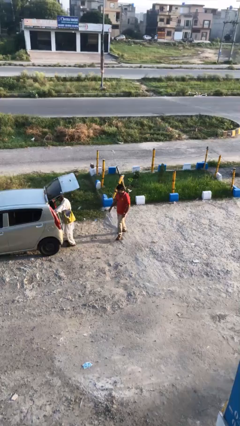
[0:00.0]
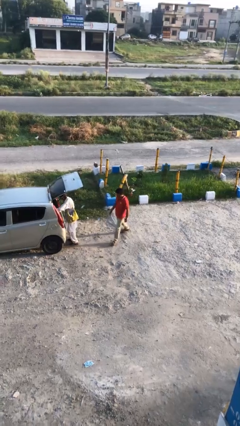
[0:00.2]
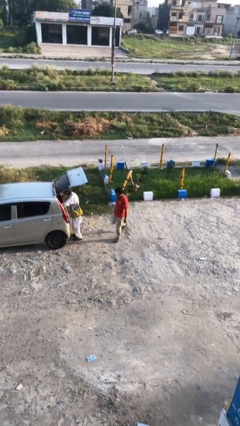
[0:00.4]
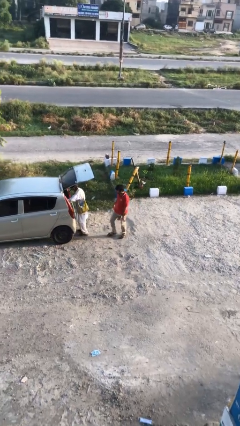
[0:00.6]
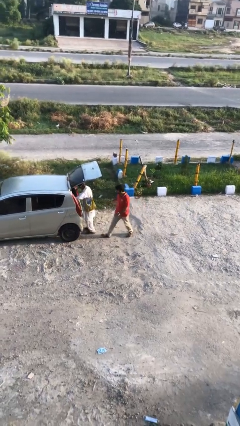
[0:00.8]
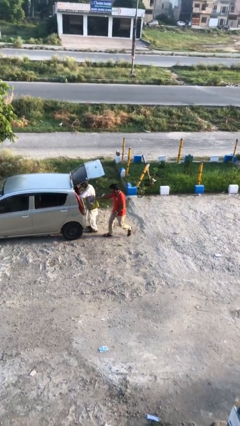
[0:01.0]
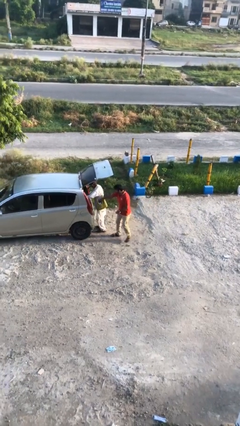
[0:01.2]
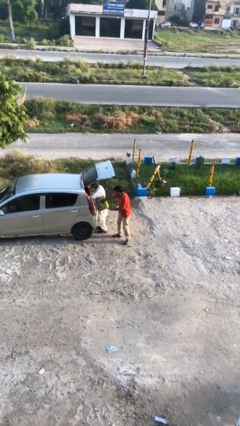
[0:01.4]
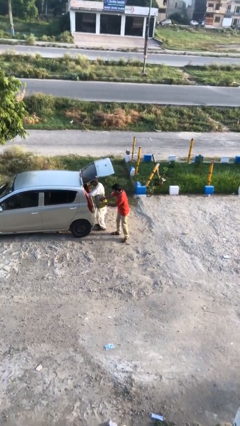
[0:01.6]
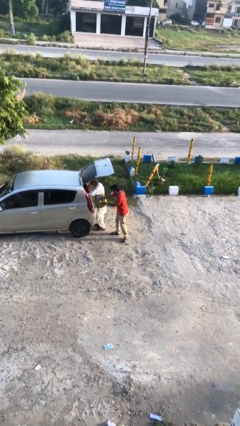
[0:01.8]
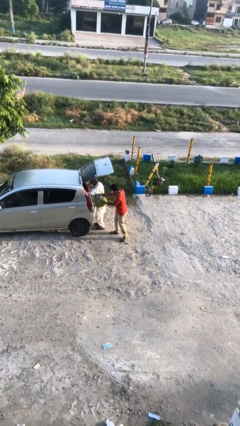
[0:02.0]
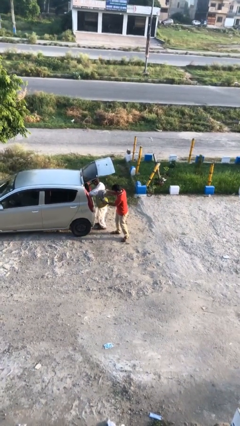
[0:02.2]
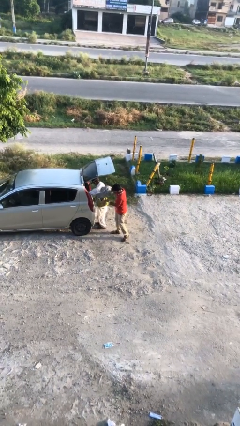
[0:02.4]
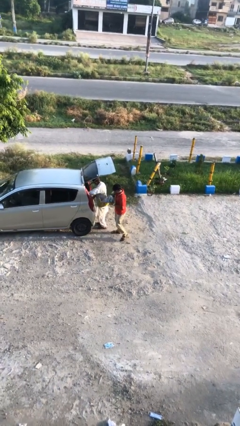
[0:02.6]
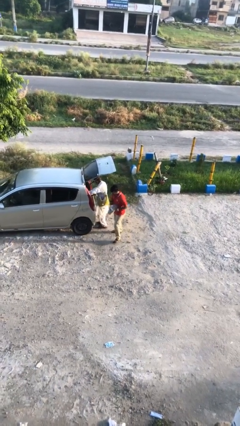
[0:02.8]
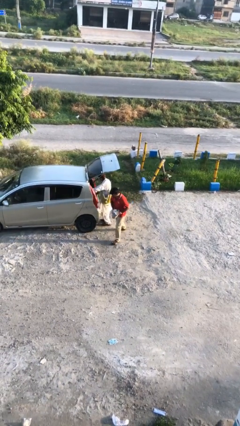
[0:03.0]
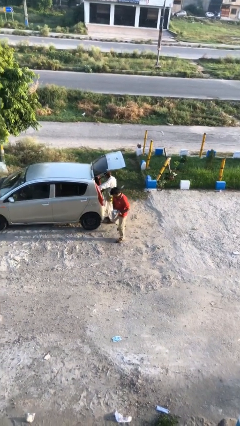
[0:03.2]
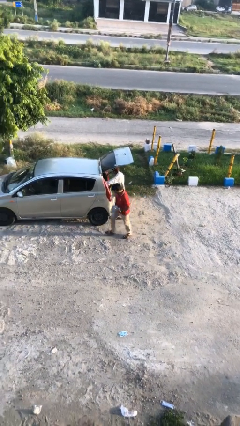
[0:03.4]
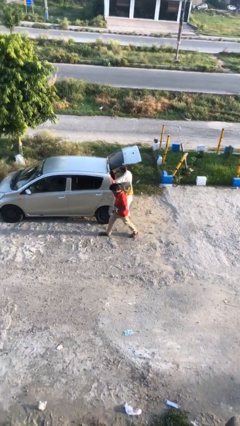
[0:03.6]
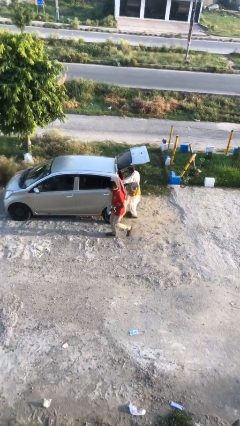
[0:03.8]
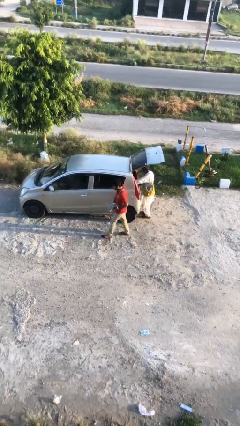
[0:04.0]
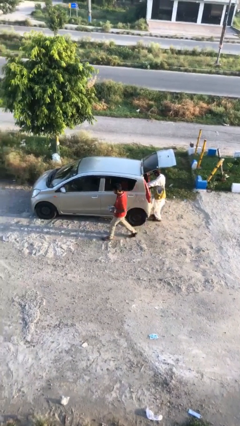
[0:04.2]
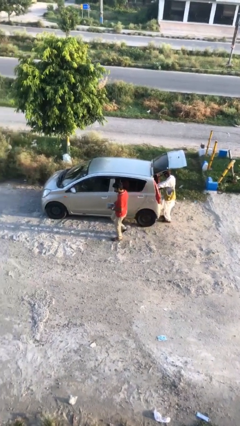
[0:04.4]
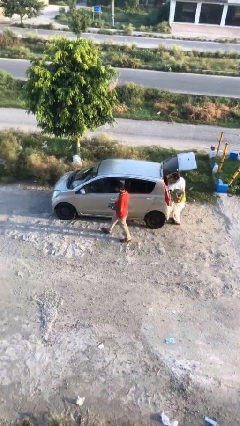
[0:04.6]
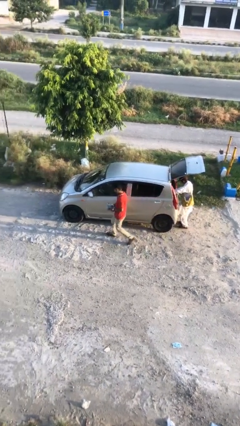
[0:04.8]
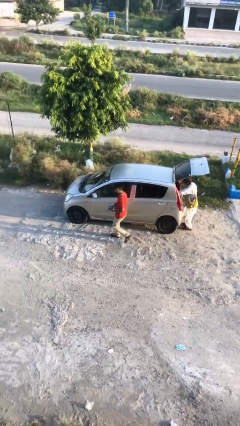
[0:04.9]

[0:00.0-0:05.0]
person steals object from person

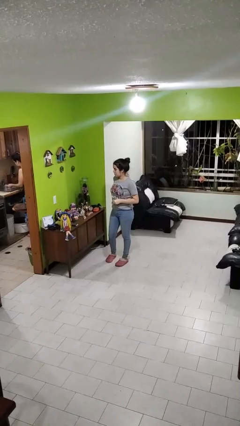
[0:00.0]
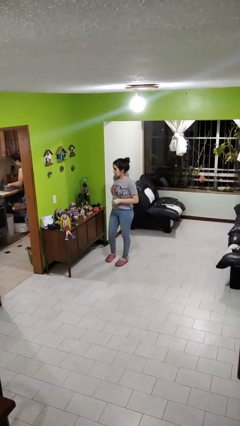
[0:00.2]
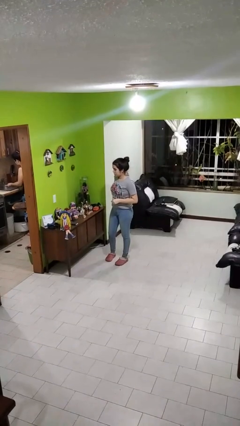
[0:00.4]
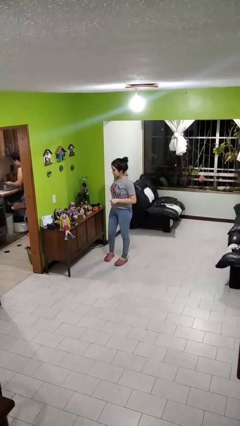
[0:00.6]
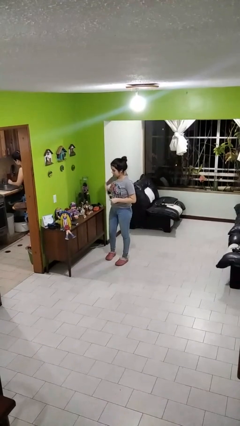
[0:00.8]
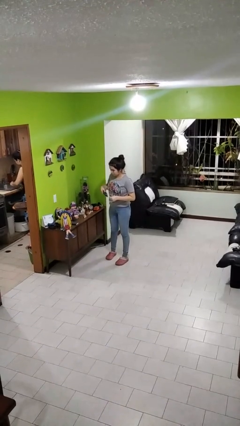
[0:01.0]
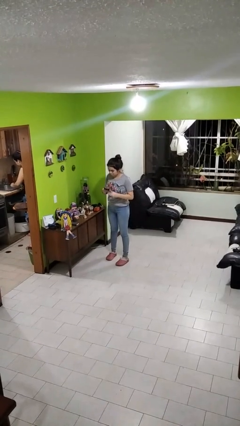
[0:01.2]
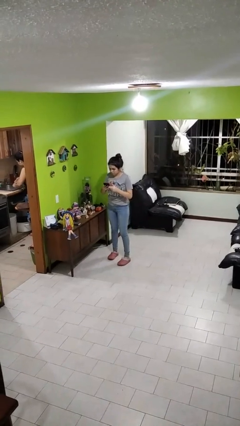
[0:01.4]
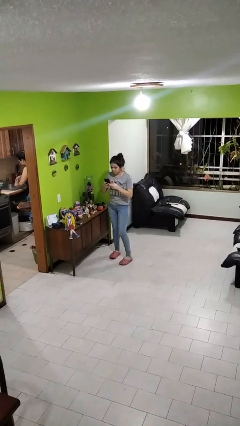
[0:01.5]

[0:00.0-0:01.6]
person takes phone from pocket

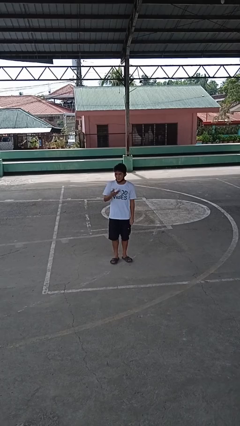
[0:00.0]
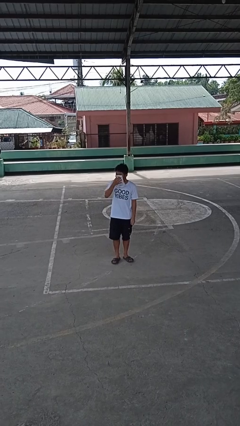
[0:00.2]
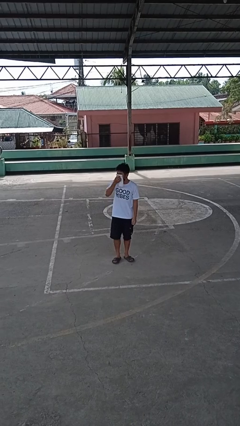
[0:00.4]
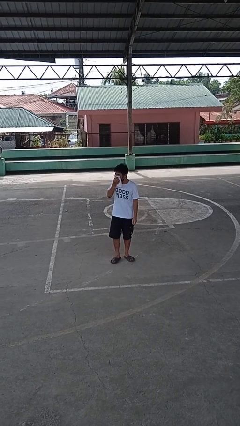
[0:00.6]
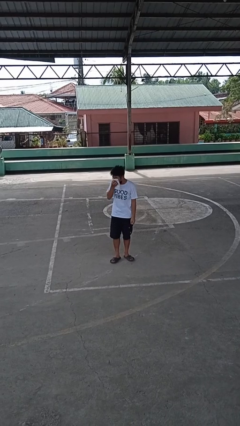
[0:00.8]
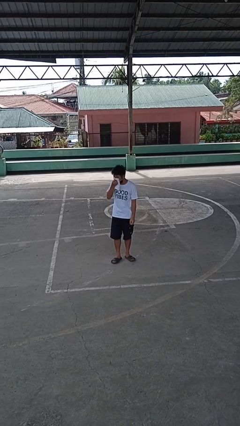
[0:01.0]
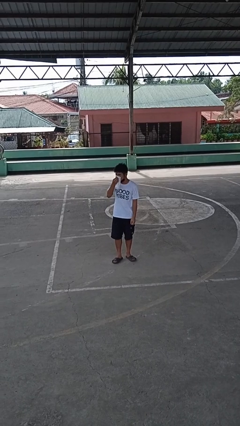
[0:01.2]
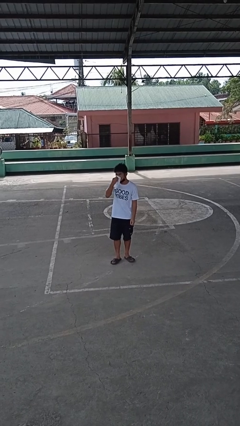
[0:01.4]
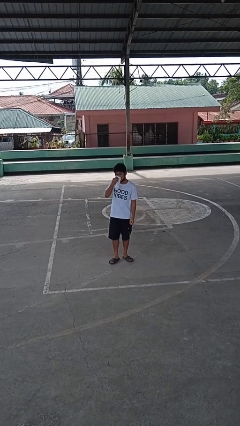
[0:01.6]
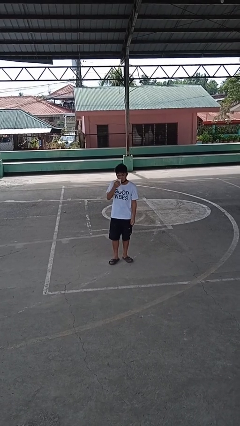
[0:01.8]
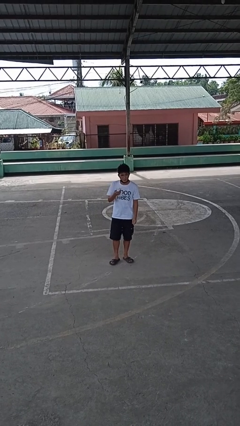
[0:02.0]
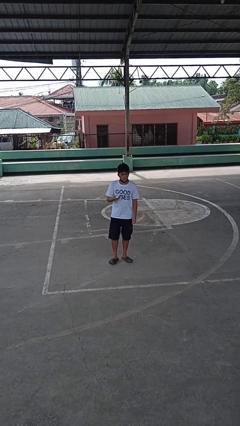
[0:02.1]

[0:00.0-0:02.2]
person blows nose

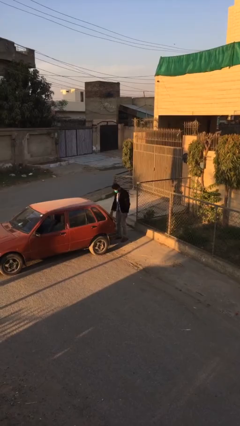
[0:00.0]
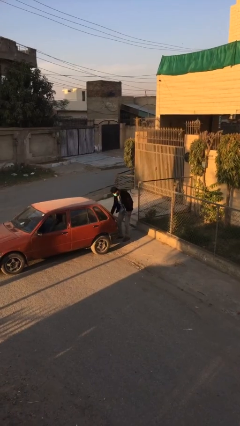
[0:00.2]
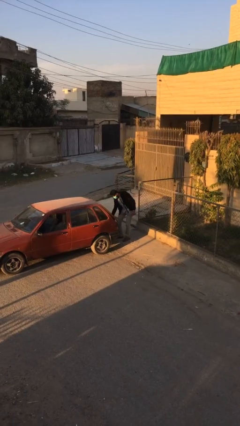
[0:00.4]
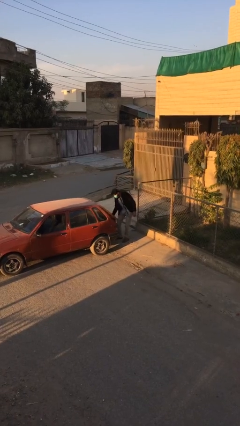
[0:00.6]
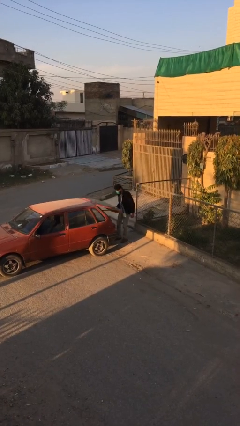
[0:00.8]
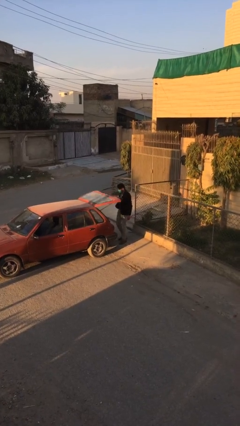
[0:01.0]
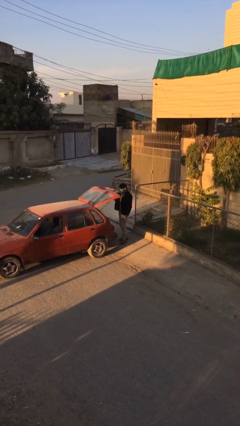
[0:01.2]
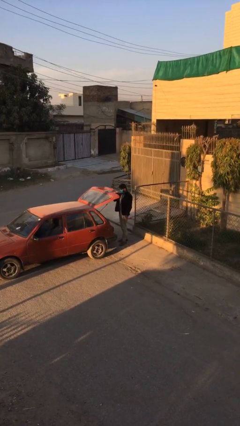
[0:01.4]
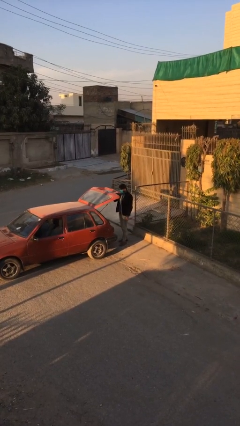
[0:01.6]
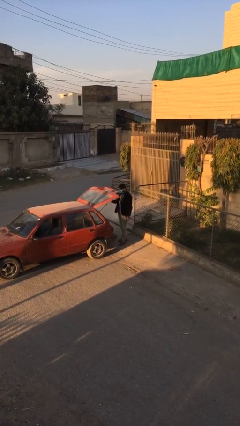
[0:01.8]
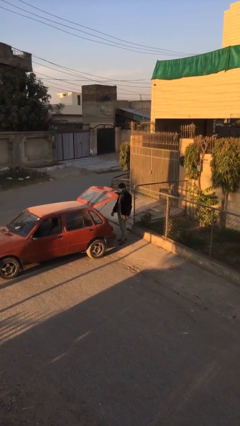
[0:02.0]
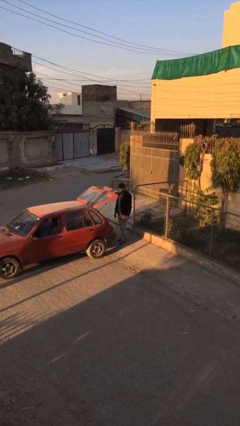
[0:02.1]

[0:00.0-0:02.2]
person opens car trunk

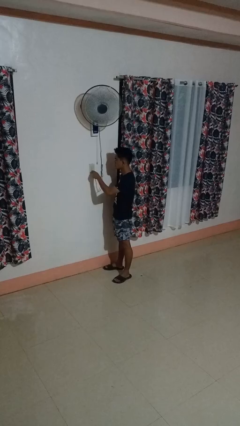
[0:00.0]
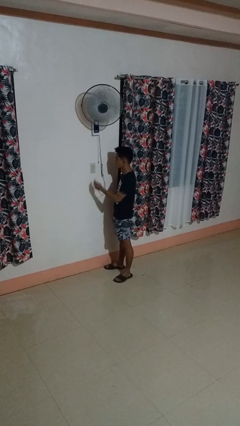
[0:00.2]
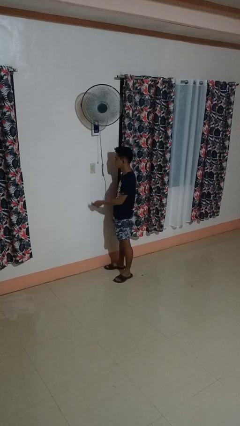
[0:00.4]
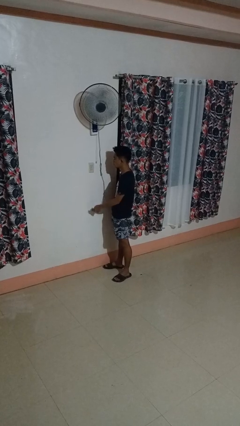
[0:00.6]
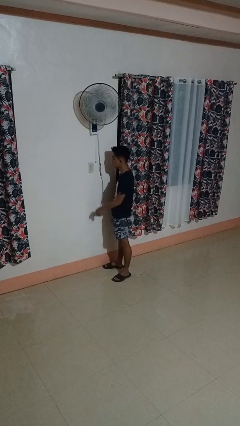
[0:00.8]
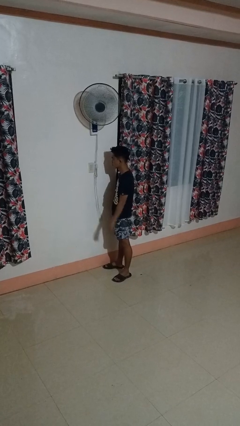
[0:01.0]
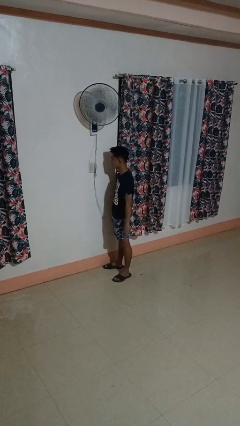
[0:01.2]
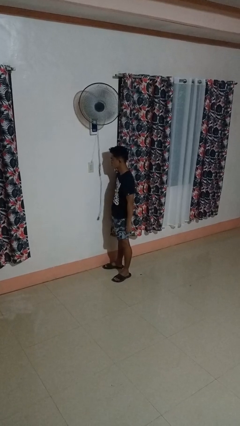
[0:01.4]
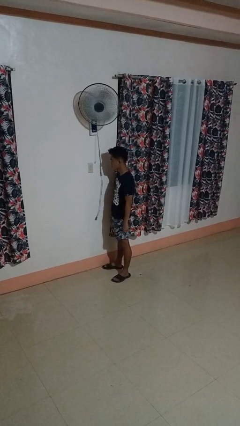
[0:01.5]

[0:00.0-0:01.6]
person unplugs from electrical socket

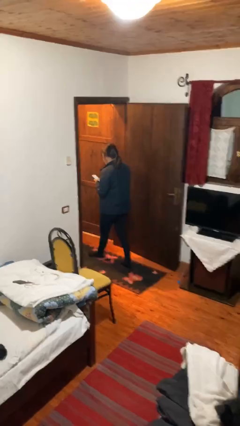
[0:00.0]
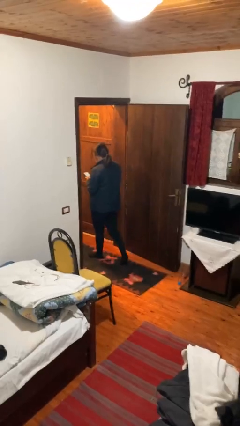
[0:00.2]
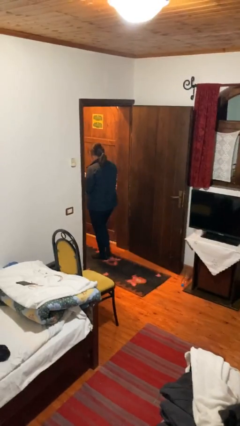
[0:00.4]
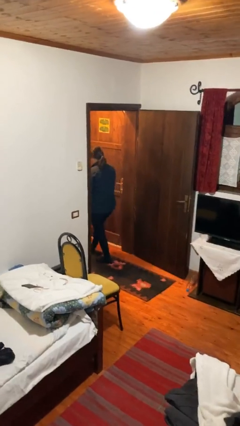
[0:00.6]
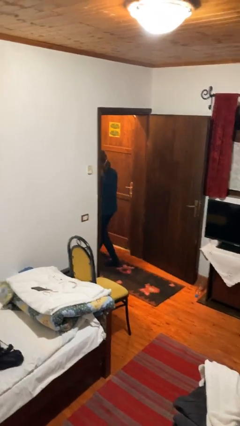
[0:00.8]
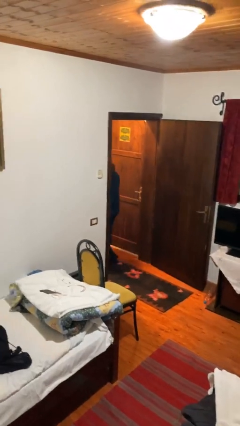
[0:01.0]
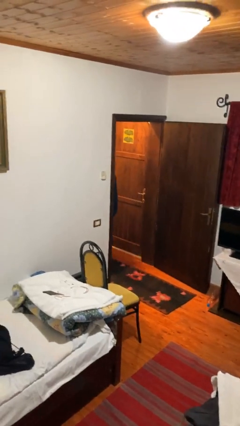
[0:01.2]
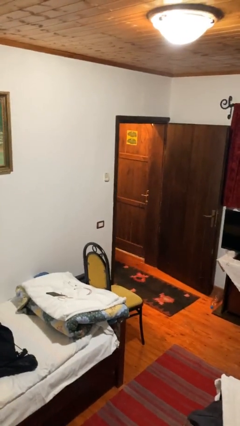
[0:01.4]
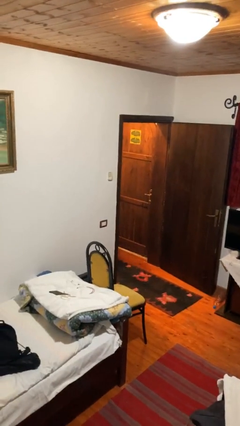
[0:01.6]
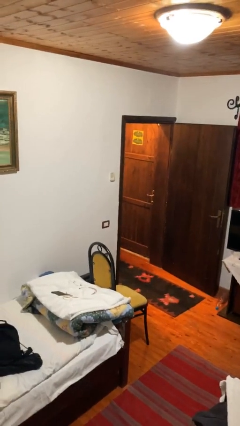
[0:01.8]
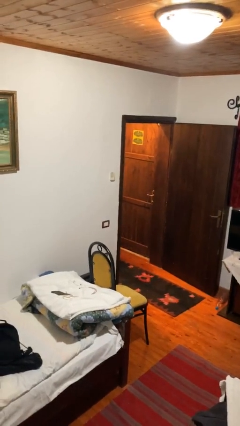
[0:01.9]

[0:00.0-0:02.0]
person exits scene through structure

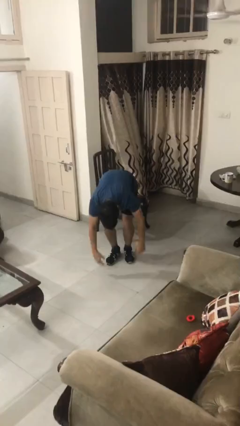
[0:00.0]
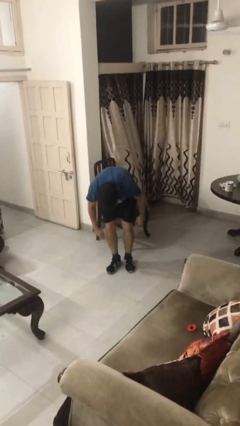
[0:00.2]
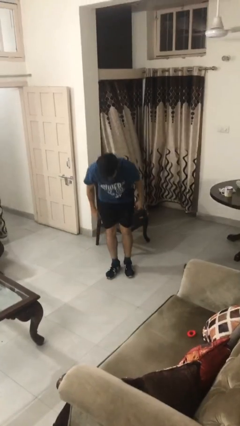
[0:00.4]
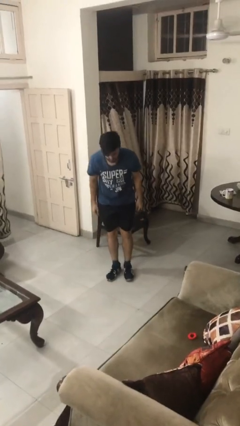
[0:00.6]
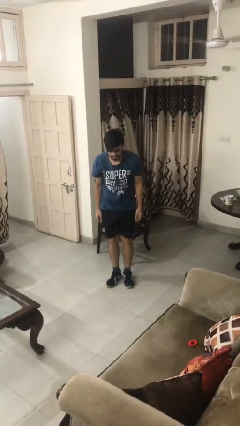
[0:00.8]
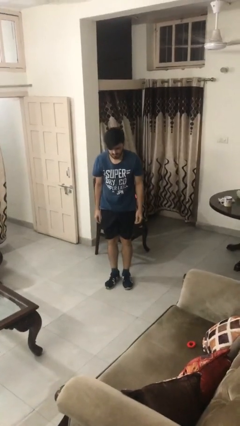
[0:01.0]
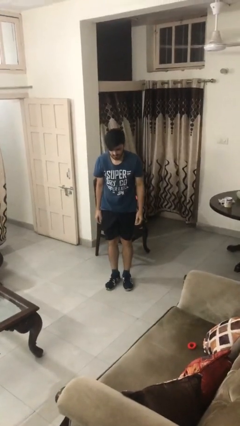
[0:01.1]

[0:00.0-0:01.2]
person stands up from floor

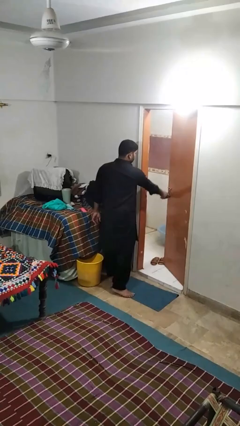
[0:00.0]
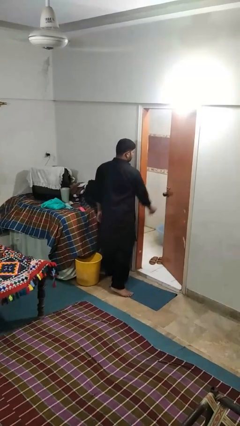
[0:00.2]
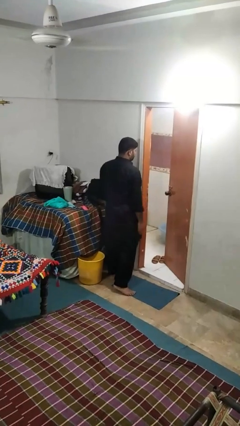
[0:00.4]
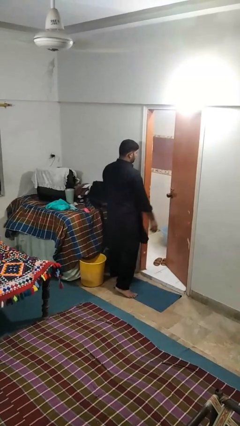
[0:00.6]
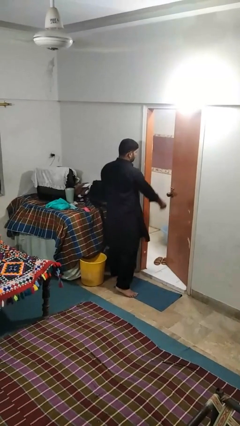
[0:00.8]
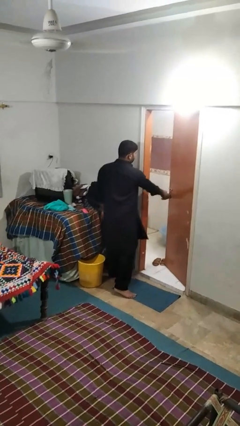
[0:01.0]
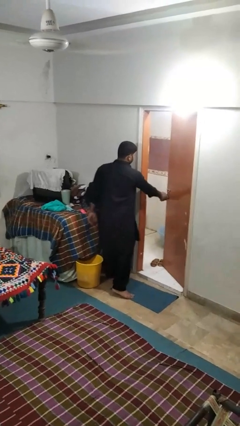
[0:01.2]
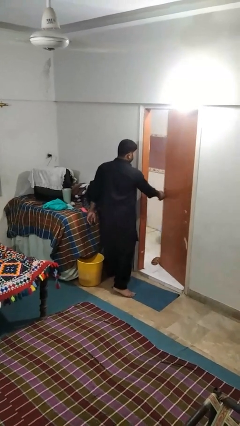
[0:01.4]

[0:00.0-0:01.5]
person closes facility door
